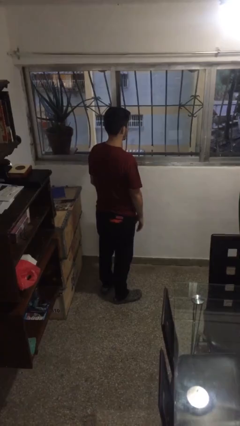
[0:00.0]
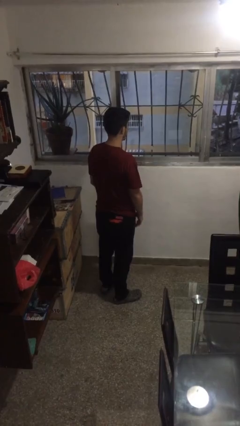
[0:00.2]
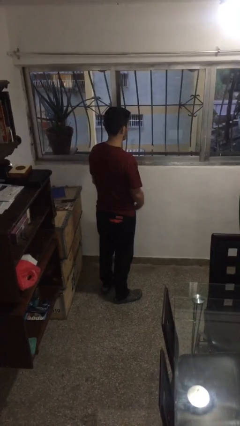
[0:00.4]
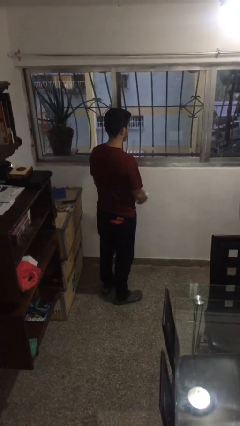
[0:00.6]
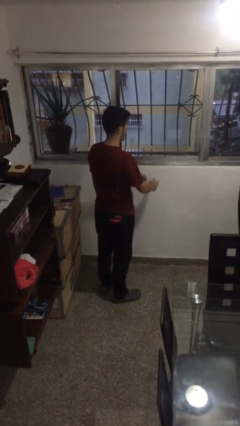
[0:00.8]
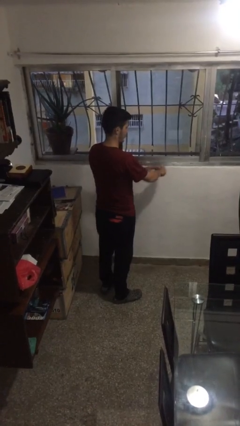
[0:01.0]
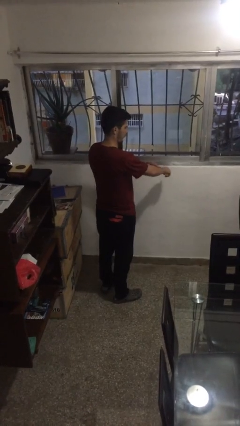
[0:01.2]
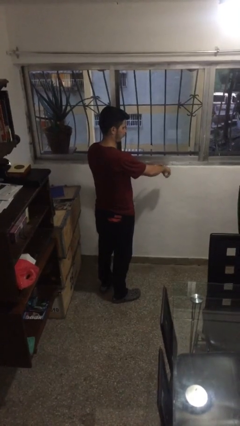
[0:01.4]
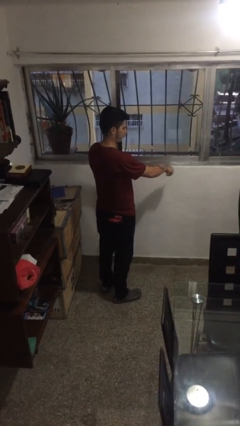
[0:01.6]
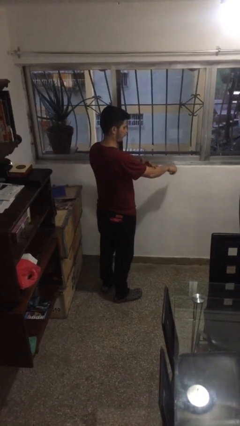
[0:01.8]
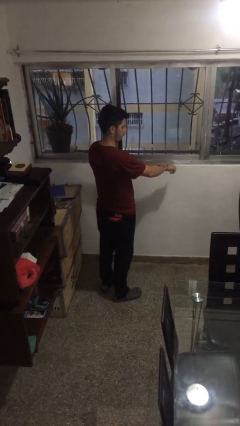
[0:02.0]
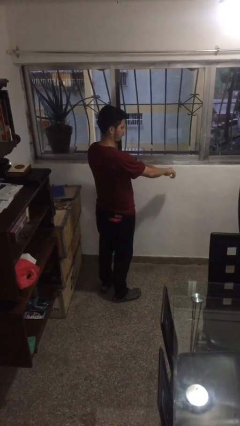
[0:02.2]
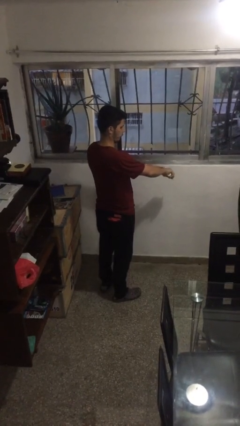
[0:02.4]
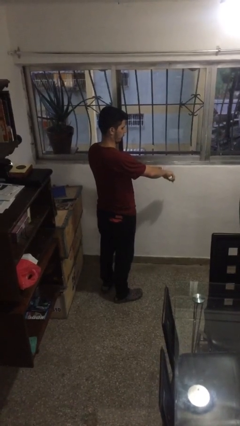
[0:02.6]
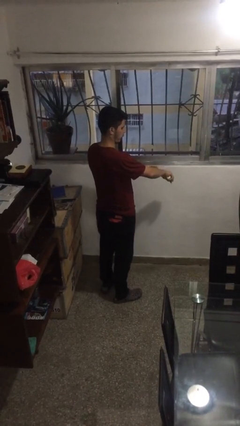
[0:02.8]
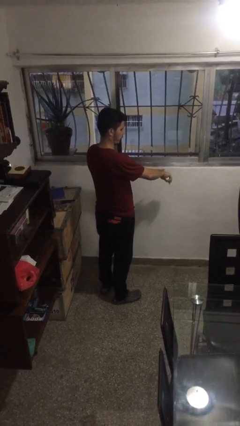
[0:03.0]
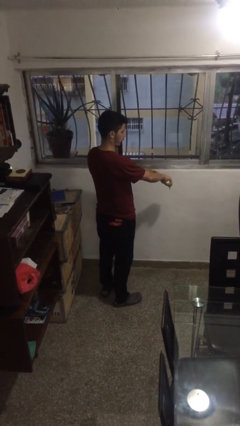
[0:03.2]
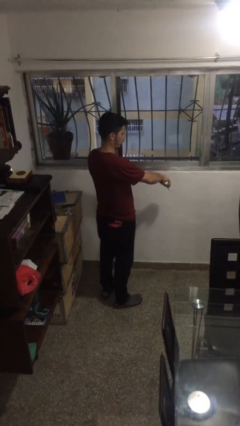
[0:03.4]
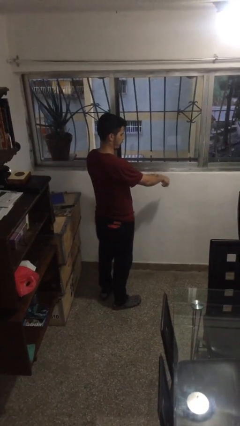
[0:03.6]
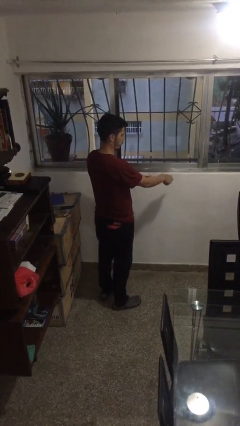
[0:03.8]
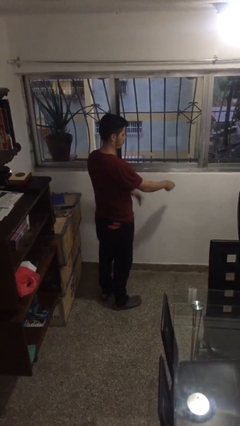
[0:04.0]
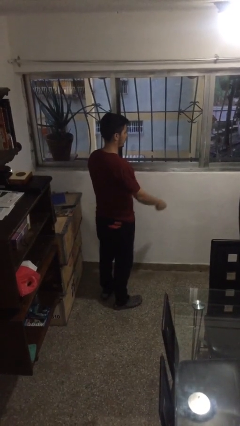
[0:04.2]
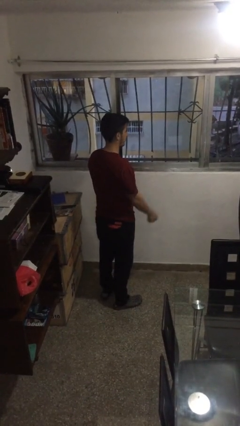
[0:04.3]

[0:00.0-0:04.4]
person applies sunscreen

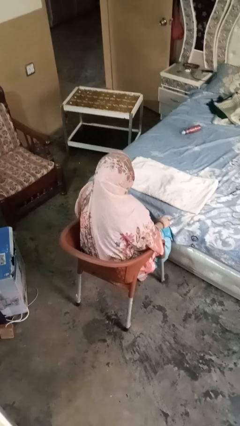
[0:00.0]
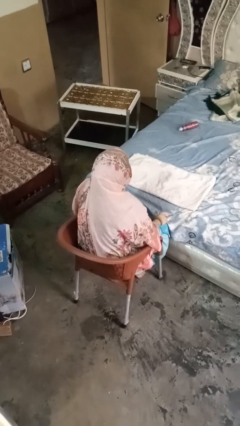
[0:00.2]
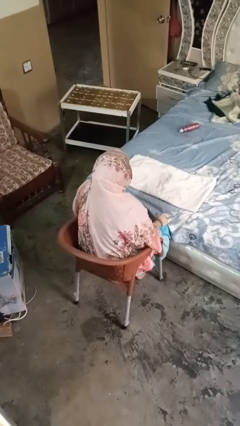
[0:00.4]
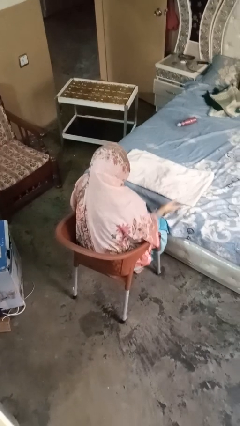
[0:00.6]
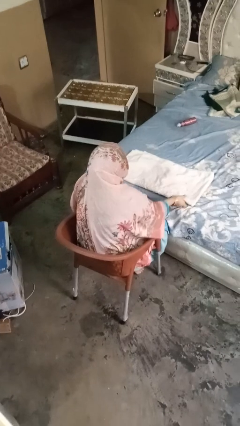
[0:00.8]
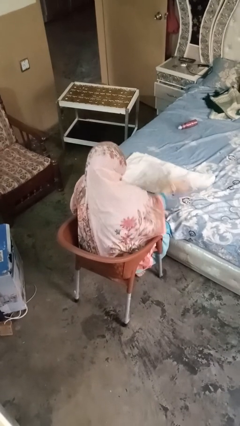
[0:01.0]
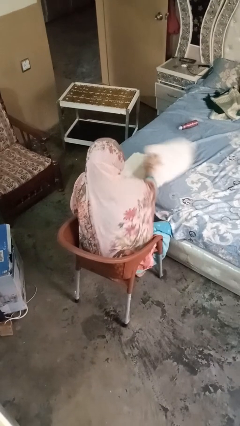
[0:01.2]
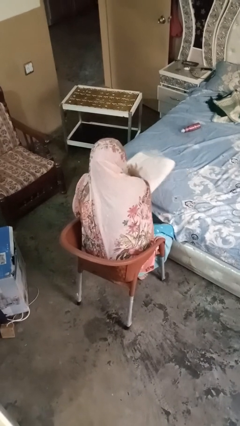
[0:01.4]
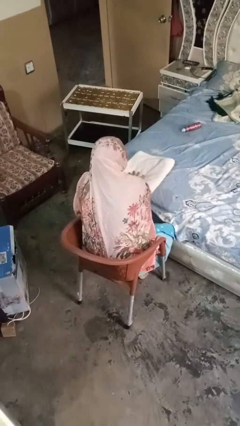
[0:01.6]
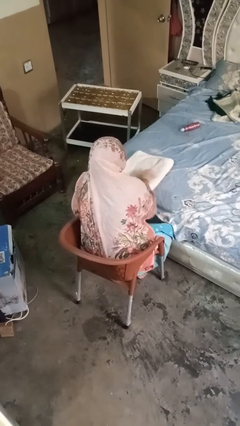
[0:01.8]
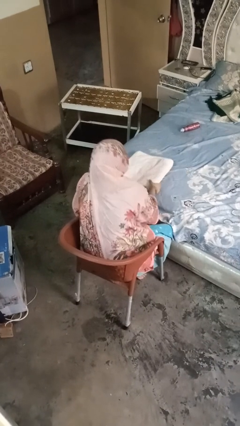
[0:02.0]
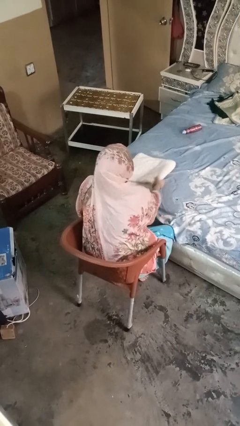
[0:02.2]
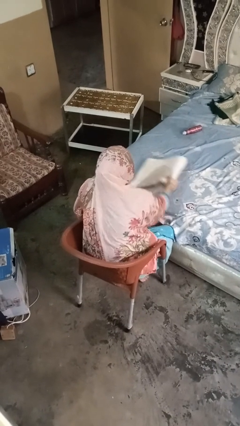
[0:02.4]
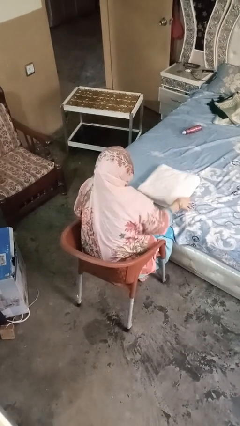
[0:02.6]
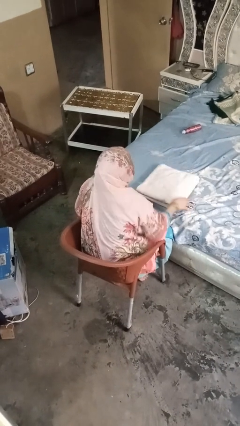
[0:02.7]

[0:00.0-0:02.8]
person folds towel

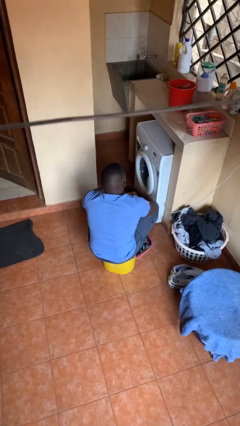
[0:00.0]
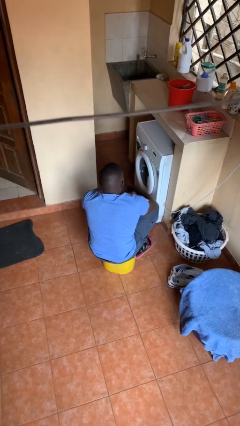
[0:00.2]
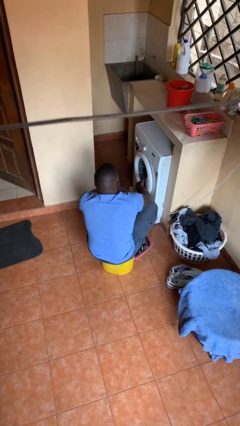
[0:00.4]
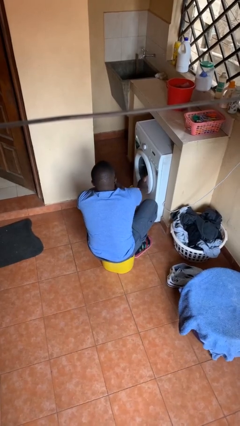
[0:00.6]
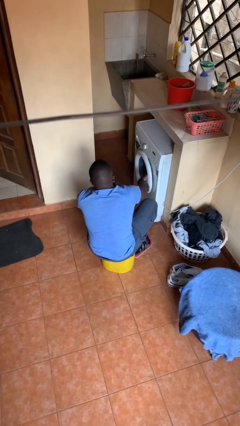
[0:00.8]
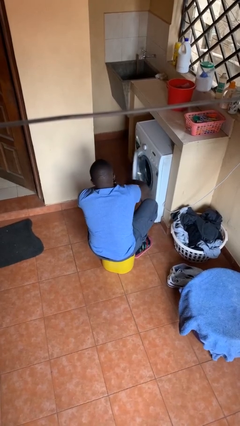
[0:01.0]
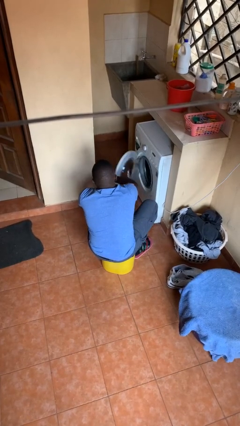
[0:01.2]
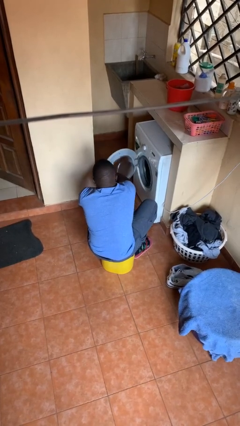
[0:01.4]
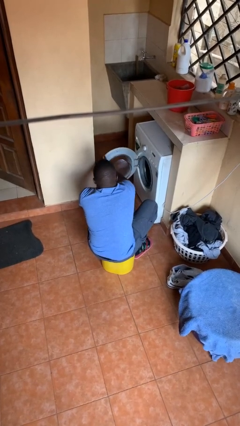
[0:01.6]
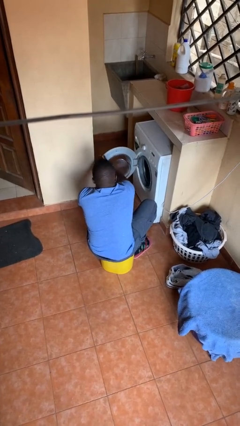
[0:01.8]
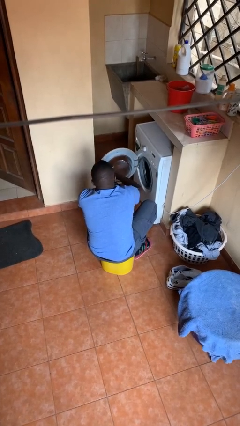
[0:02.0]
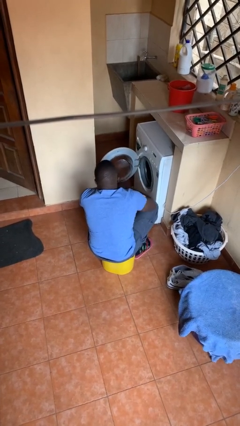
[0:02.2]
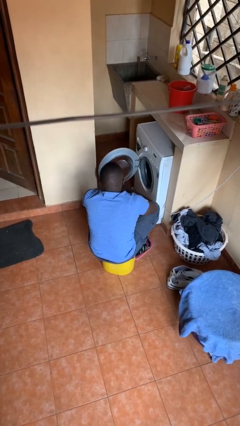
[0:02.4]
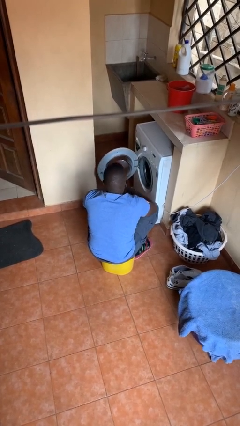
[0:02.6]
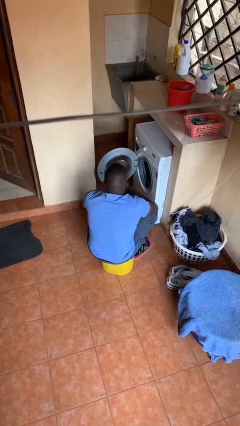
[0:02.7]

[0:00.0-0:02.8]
person opens clothes washer

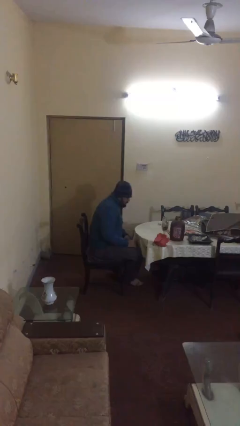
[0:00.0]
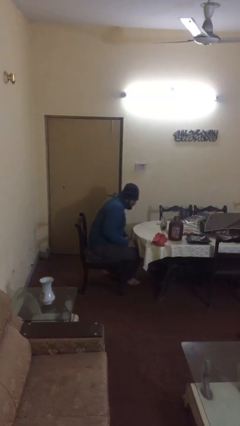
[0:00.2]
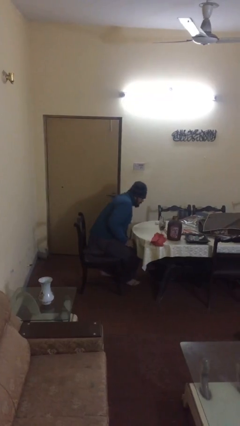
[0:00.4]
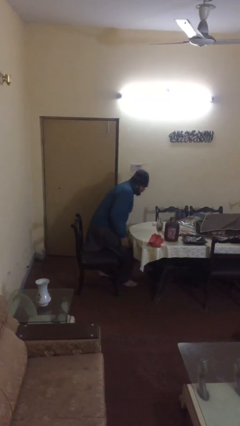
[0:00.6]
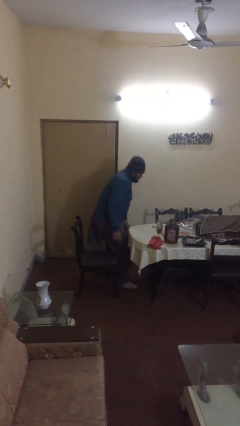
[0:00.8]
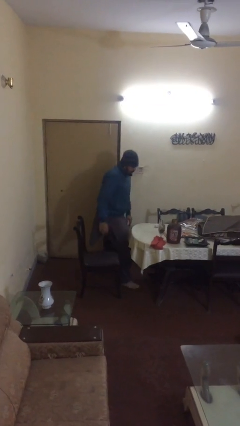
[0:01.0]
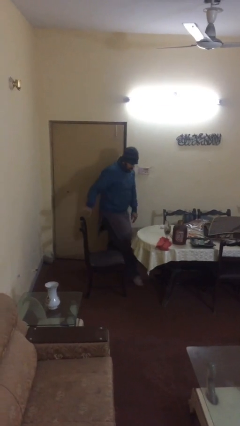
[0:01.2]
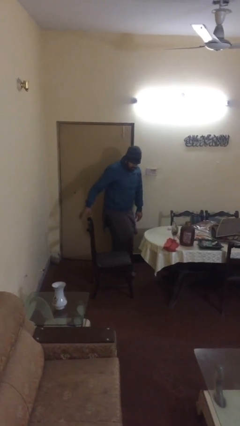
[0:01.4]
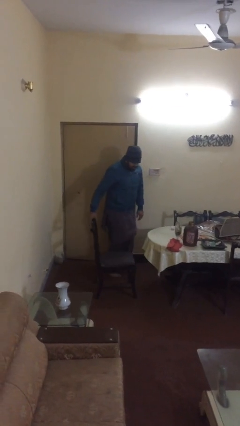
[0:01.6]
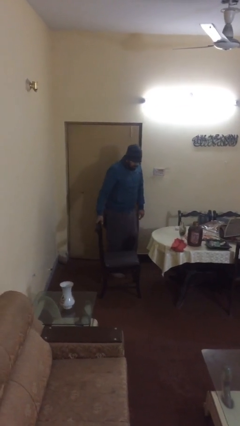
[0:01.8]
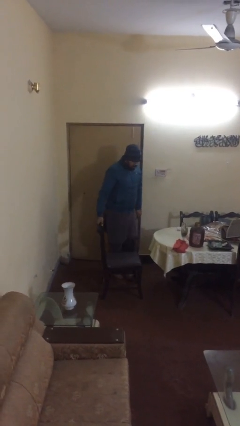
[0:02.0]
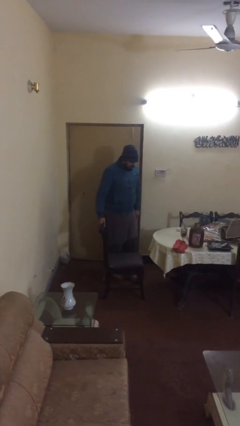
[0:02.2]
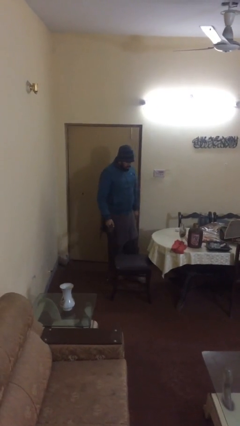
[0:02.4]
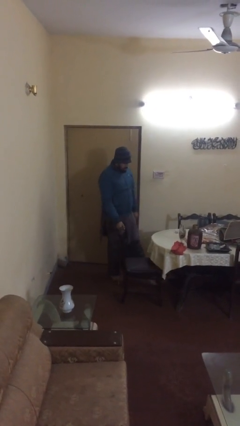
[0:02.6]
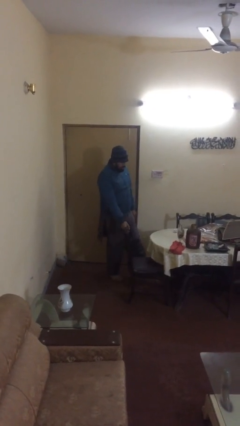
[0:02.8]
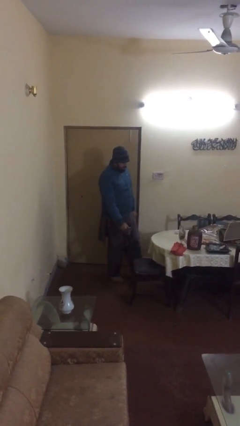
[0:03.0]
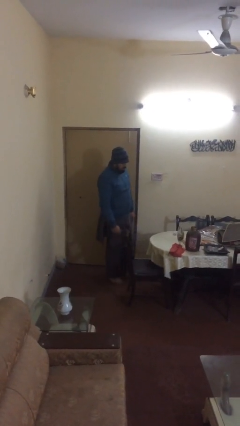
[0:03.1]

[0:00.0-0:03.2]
person stands up

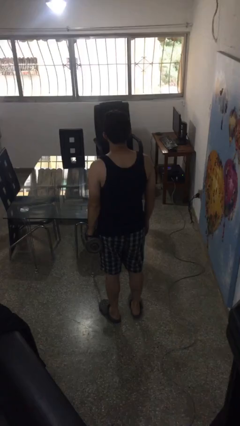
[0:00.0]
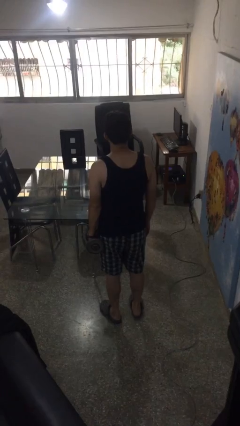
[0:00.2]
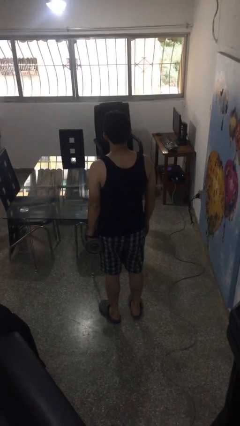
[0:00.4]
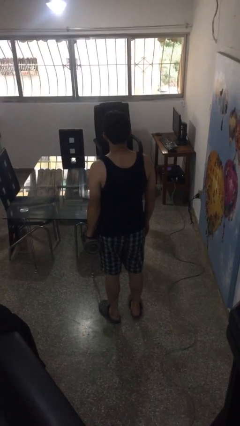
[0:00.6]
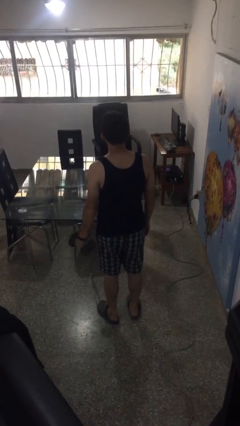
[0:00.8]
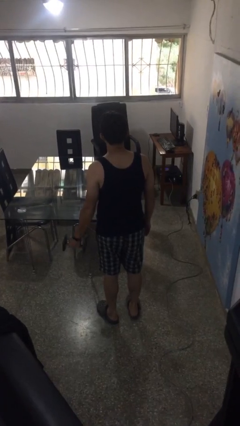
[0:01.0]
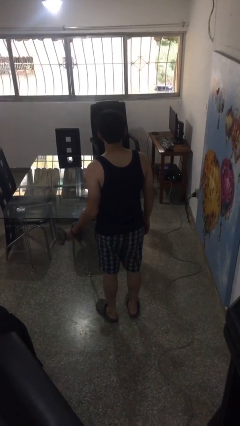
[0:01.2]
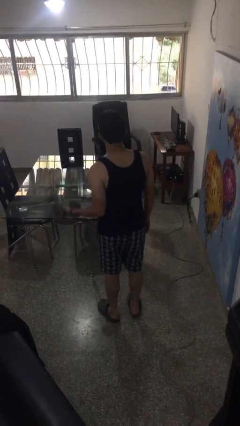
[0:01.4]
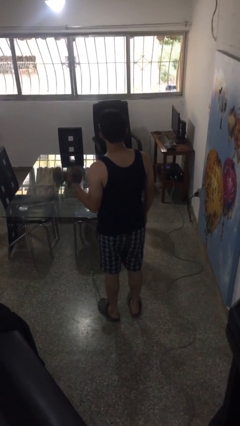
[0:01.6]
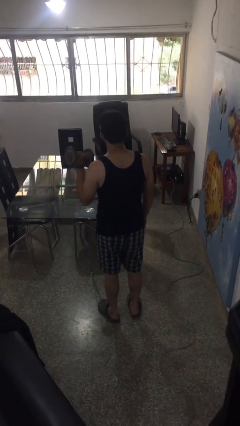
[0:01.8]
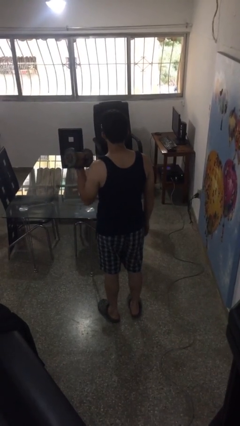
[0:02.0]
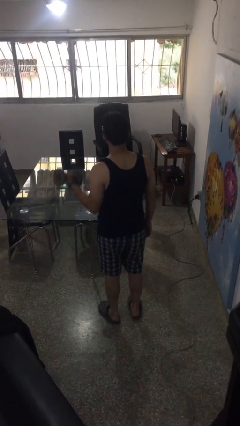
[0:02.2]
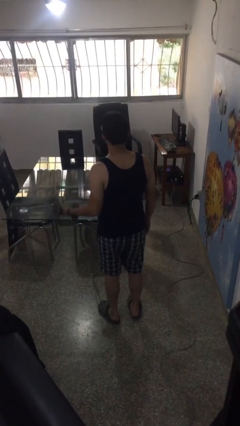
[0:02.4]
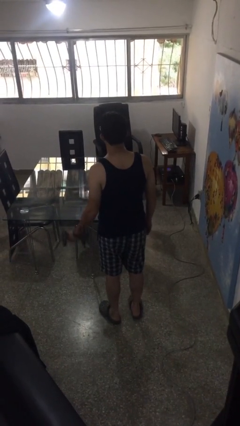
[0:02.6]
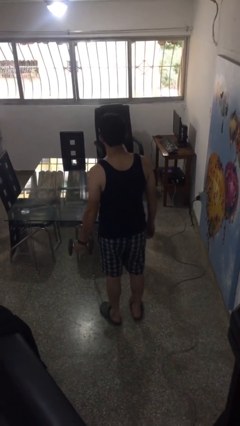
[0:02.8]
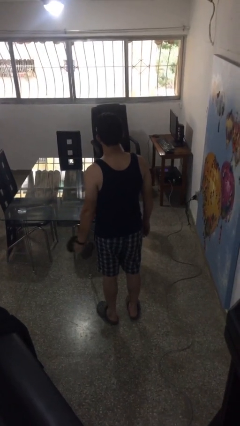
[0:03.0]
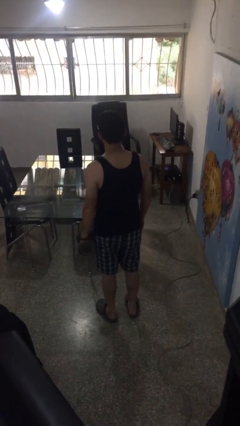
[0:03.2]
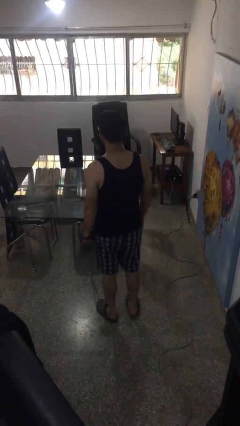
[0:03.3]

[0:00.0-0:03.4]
person lifts dumbbells

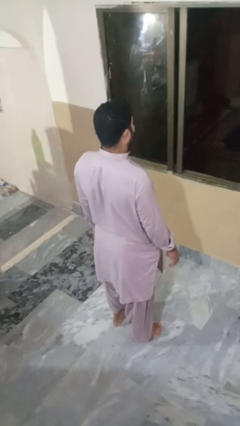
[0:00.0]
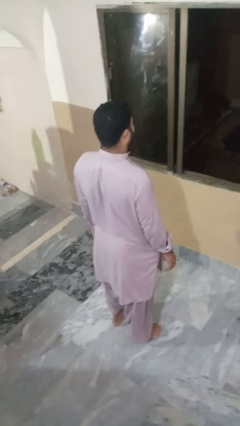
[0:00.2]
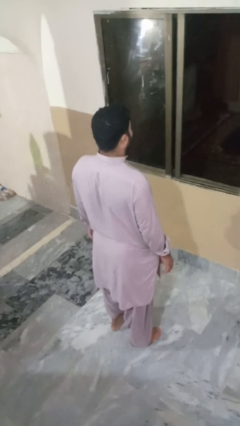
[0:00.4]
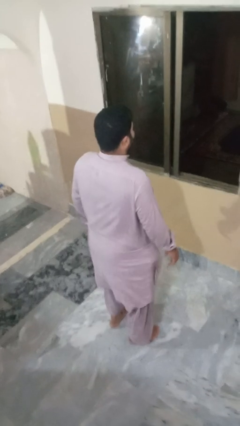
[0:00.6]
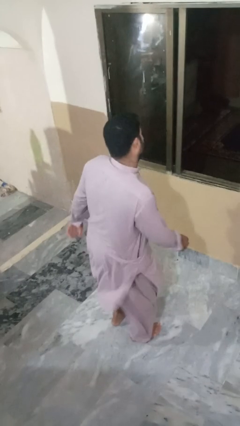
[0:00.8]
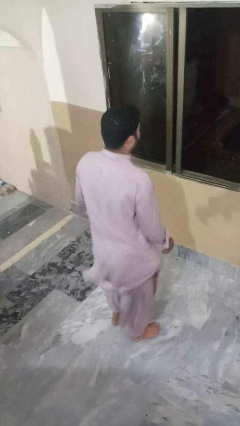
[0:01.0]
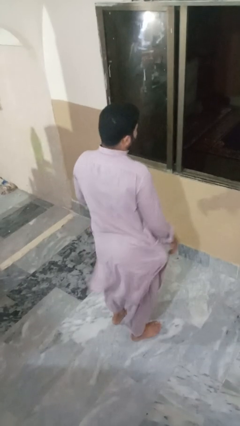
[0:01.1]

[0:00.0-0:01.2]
person wiggles hips
